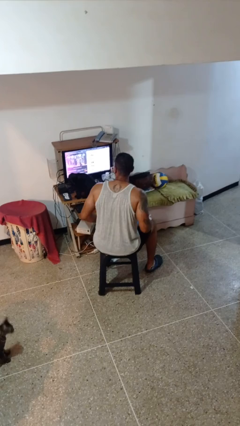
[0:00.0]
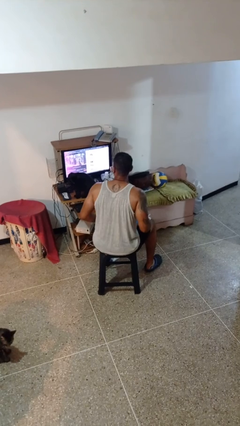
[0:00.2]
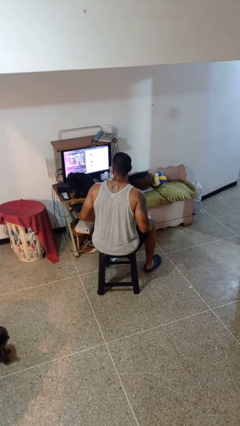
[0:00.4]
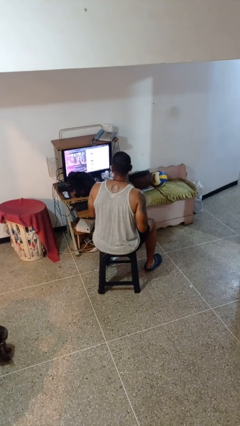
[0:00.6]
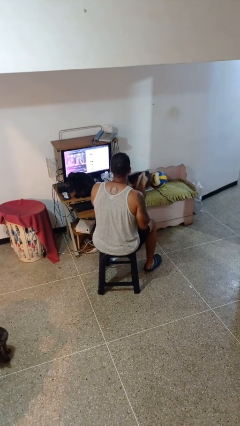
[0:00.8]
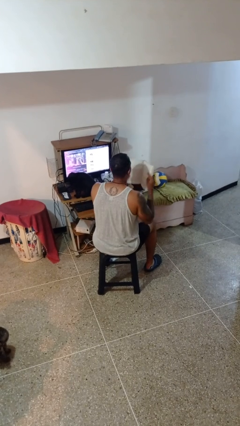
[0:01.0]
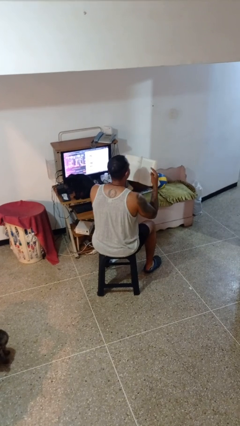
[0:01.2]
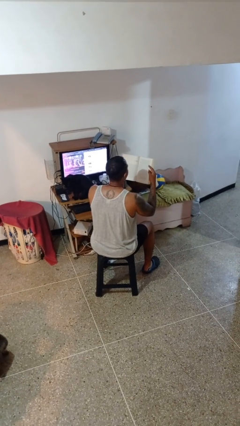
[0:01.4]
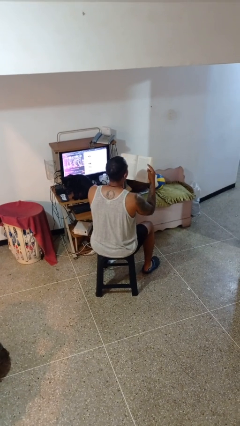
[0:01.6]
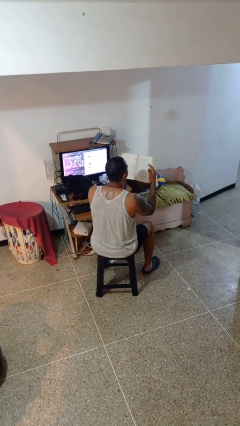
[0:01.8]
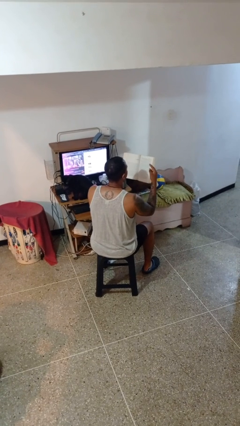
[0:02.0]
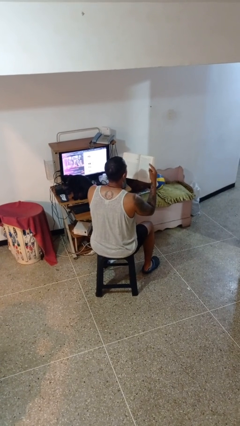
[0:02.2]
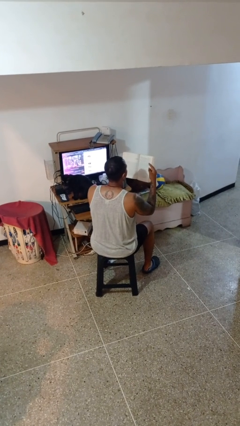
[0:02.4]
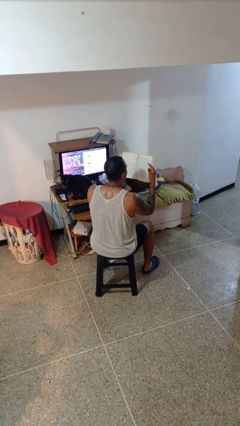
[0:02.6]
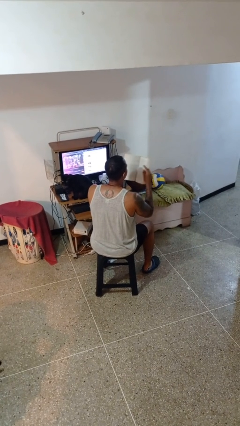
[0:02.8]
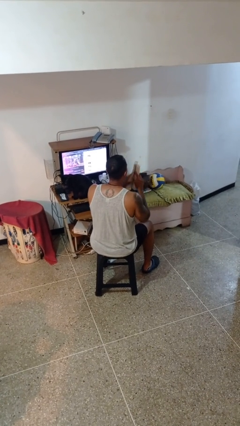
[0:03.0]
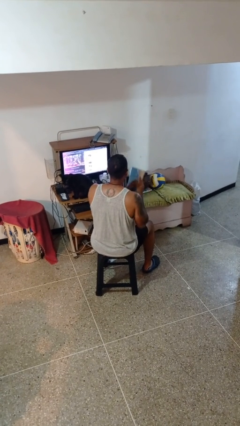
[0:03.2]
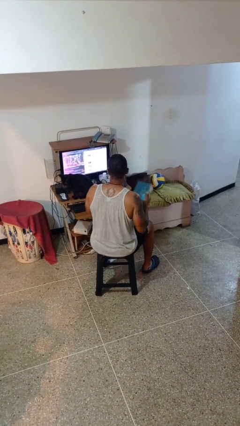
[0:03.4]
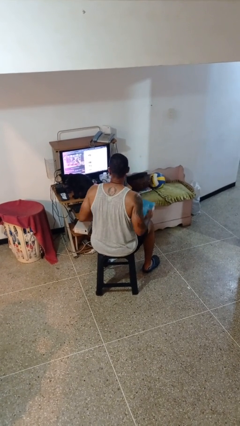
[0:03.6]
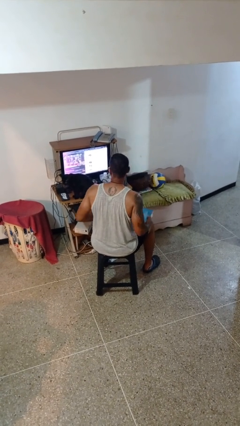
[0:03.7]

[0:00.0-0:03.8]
person reads book

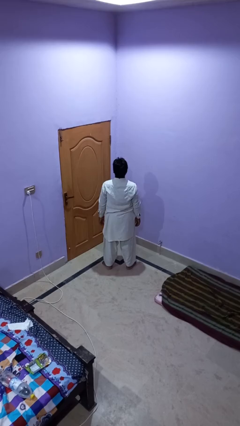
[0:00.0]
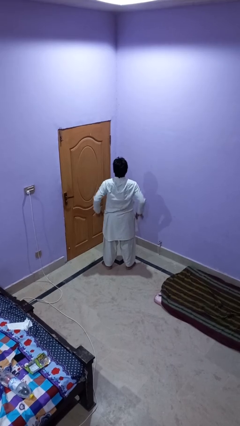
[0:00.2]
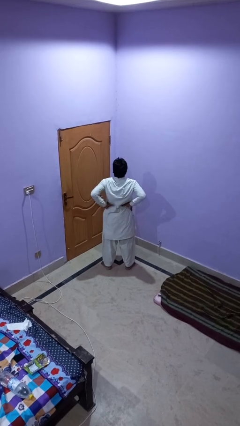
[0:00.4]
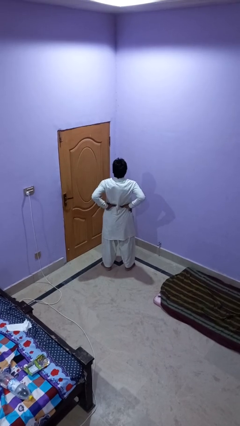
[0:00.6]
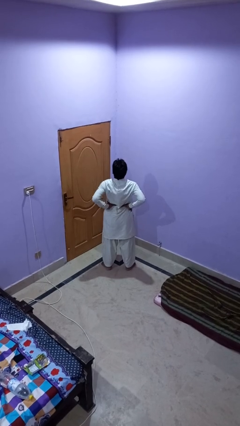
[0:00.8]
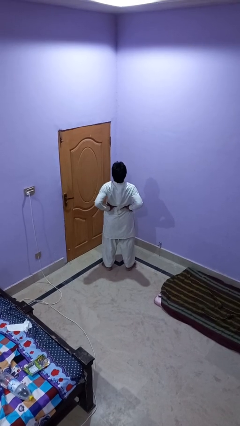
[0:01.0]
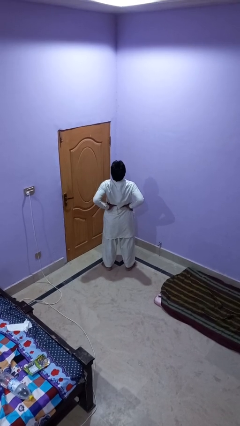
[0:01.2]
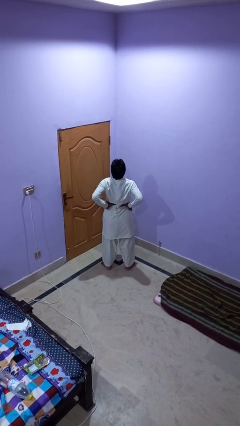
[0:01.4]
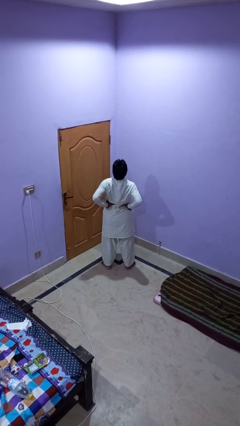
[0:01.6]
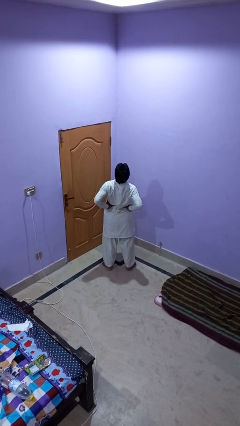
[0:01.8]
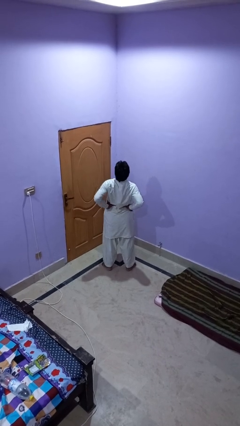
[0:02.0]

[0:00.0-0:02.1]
person stretches back

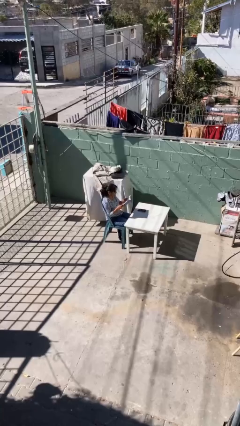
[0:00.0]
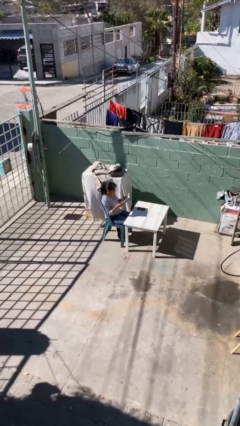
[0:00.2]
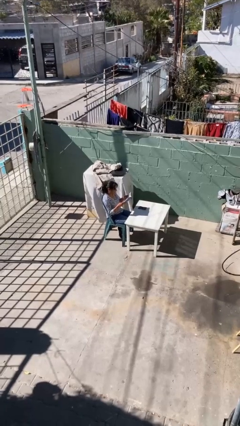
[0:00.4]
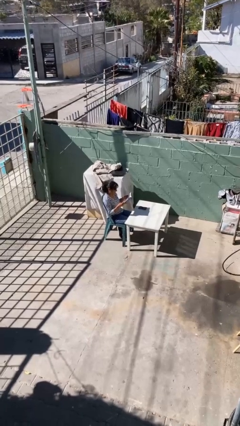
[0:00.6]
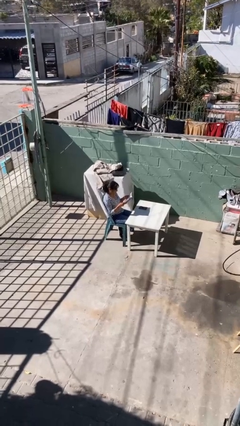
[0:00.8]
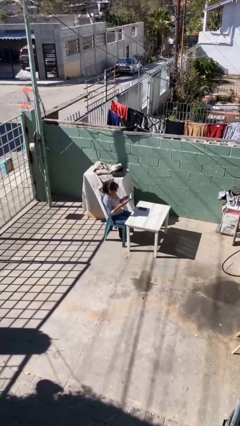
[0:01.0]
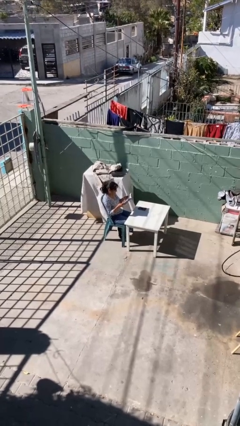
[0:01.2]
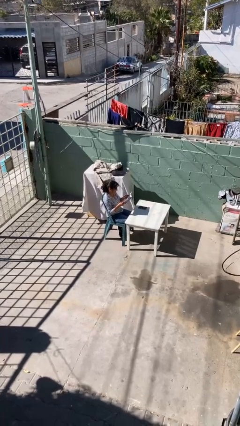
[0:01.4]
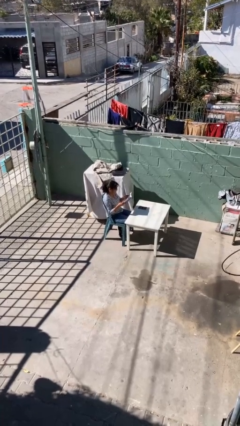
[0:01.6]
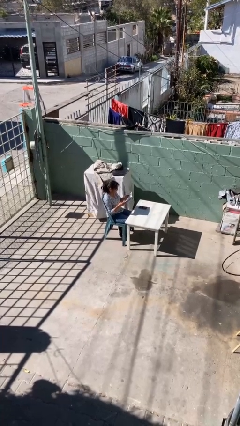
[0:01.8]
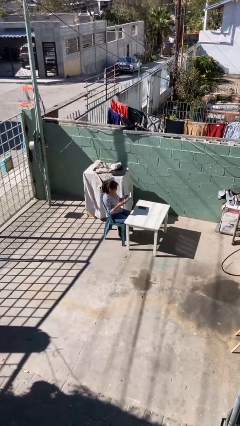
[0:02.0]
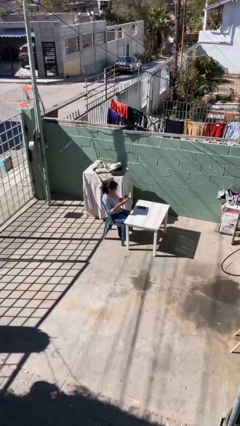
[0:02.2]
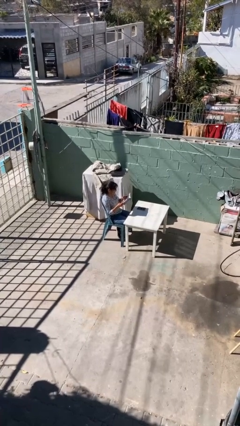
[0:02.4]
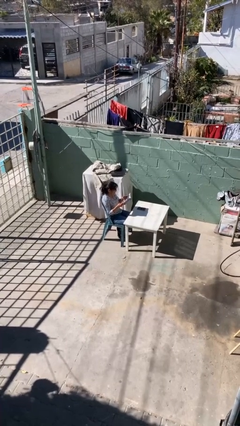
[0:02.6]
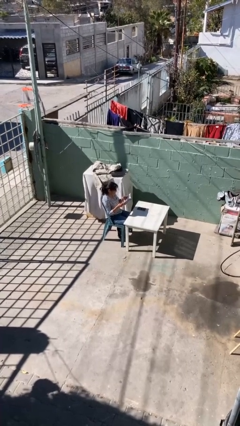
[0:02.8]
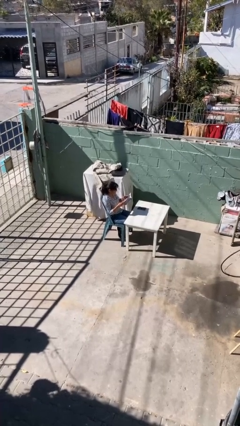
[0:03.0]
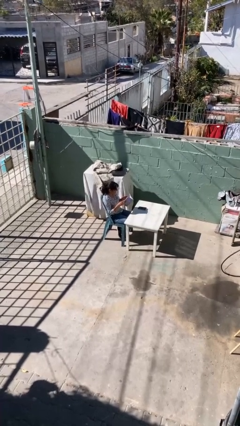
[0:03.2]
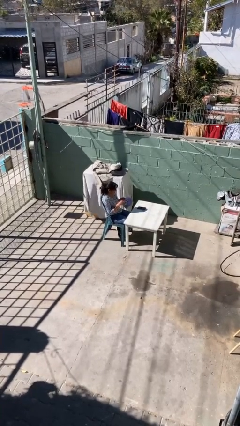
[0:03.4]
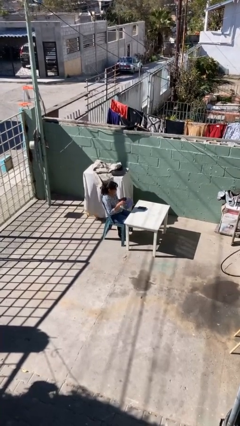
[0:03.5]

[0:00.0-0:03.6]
person reads document

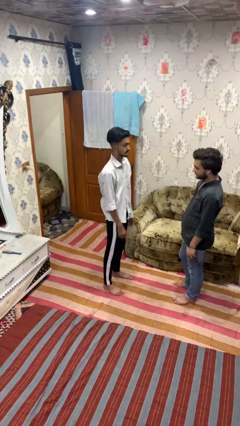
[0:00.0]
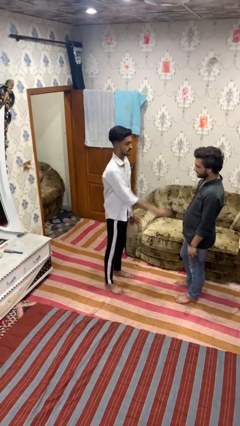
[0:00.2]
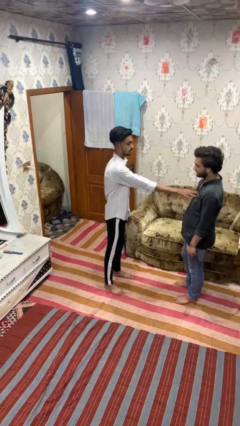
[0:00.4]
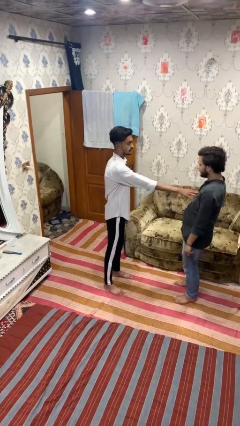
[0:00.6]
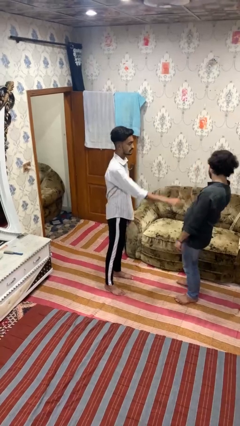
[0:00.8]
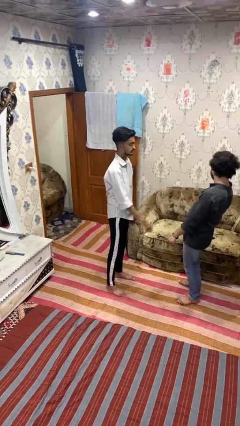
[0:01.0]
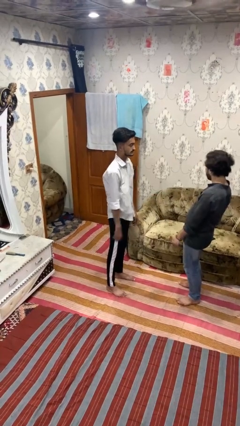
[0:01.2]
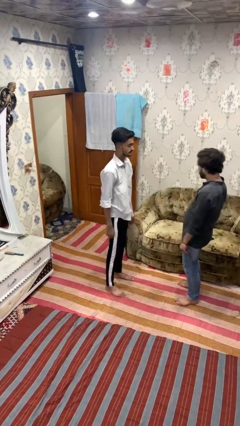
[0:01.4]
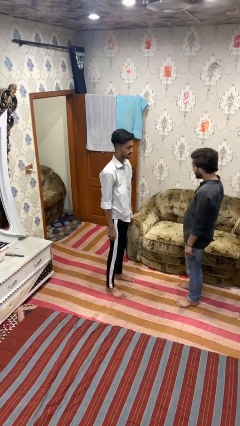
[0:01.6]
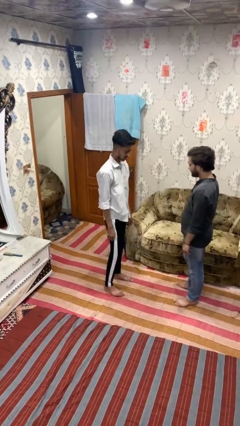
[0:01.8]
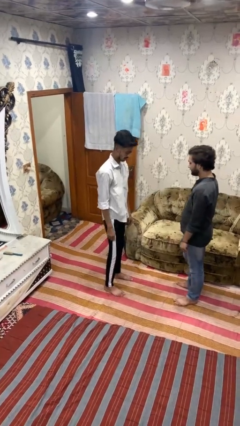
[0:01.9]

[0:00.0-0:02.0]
person shoves person

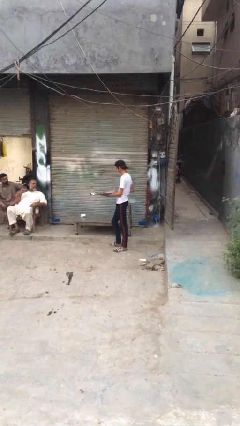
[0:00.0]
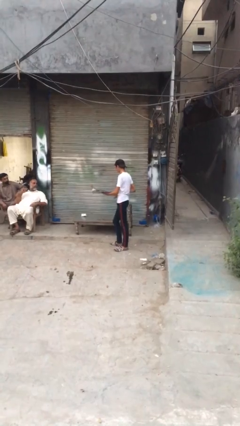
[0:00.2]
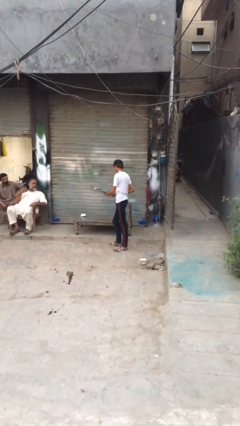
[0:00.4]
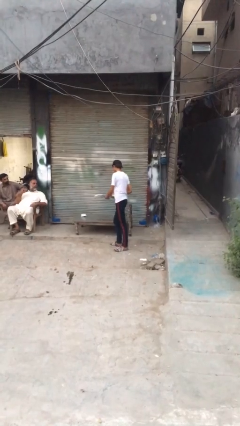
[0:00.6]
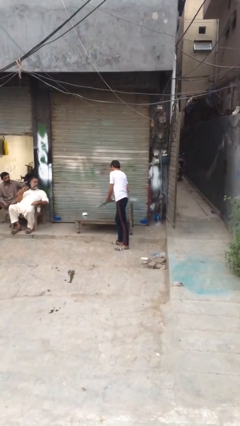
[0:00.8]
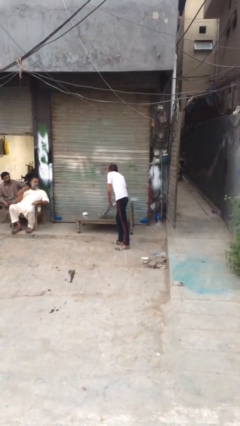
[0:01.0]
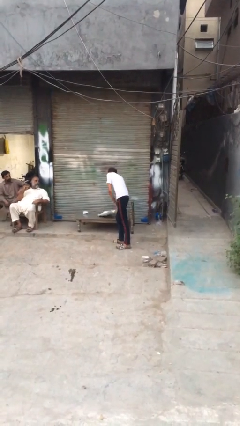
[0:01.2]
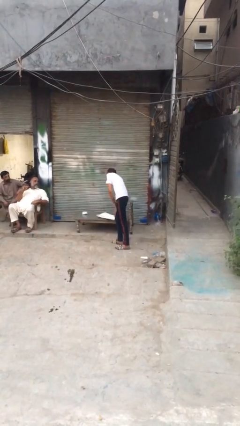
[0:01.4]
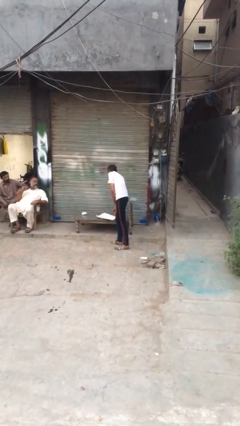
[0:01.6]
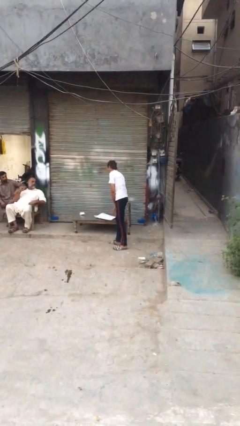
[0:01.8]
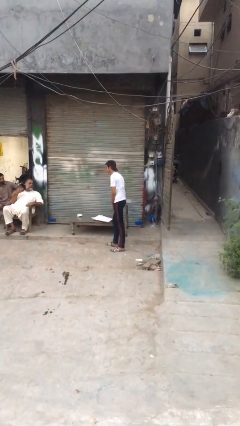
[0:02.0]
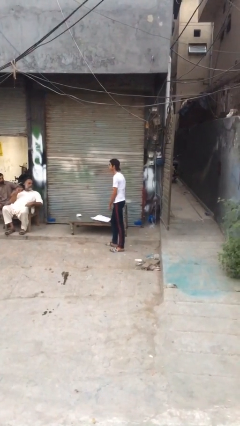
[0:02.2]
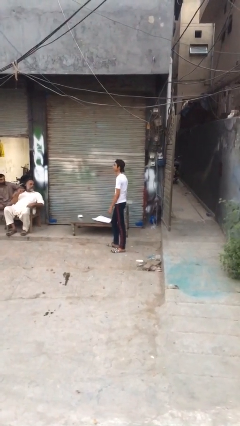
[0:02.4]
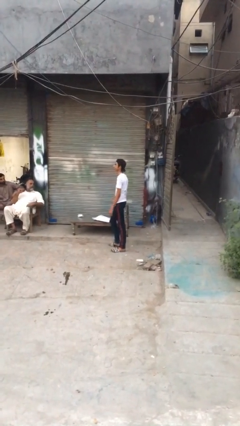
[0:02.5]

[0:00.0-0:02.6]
person puts down object on table

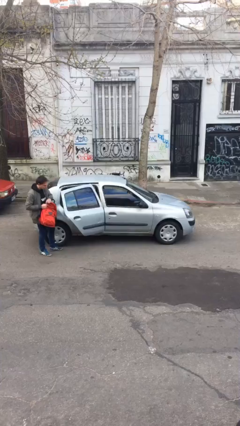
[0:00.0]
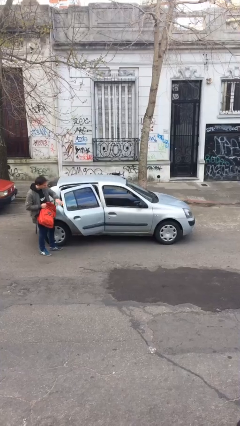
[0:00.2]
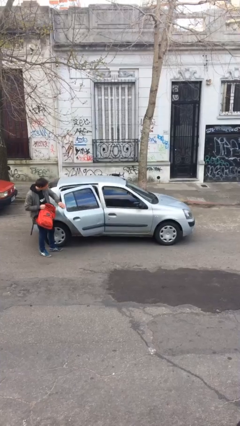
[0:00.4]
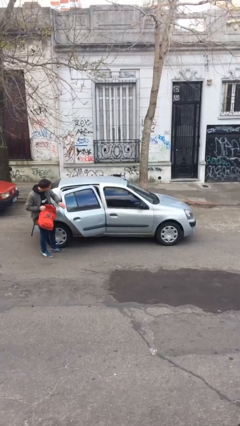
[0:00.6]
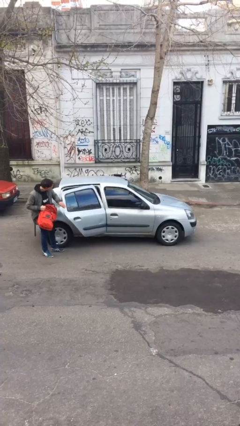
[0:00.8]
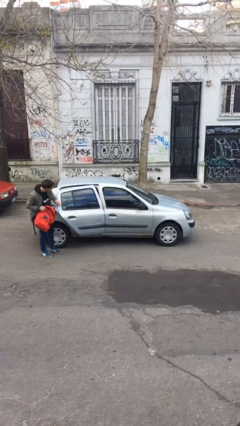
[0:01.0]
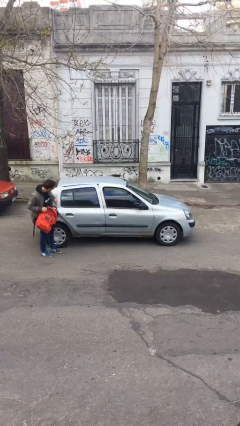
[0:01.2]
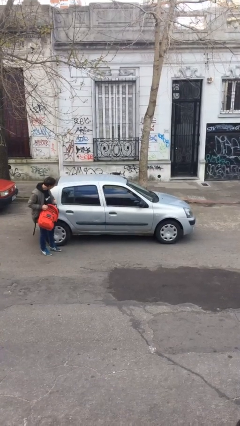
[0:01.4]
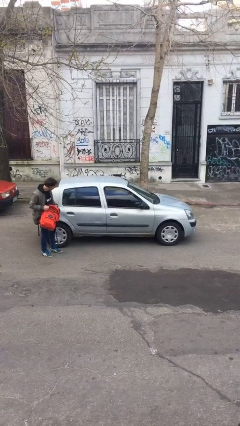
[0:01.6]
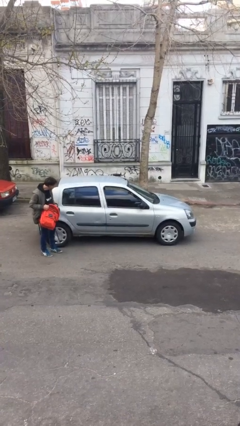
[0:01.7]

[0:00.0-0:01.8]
person closes car door

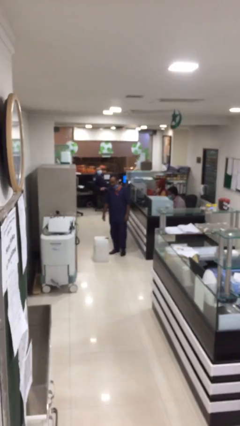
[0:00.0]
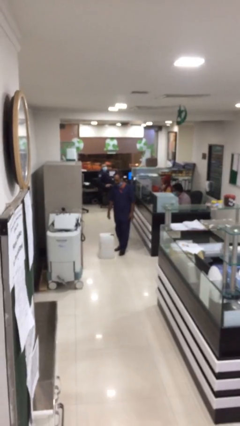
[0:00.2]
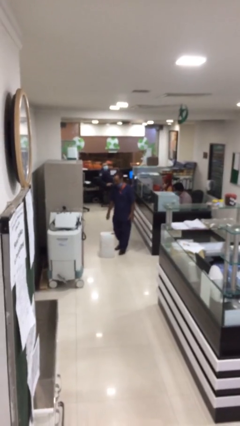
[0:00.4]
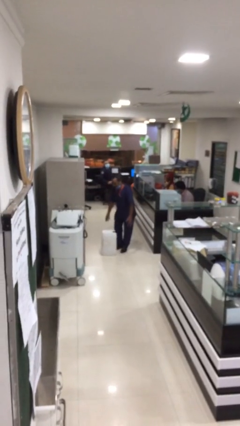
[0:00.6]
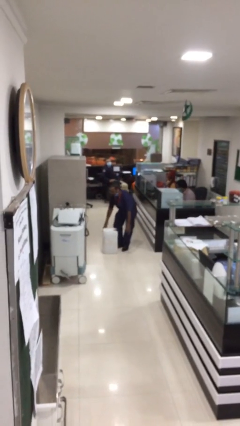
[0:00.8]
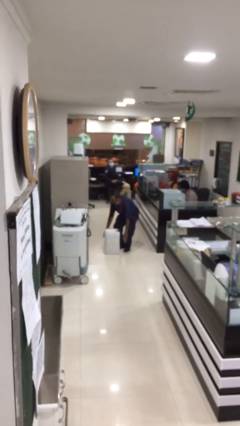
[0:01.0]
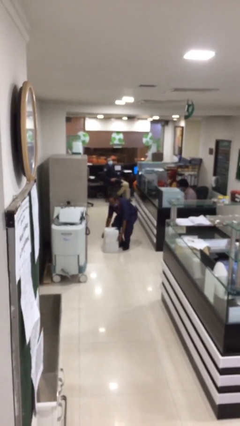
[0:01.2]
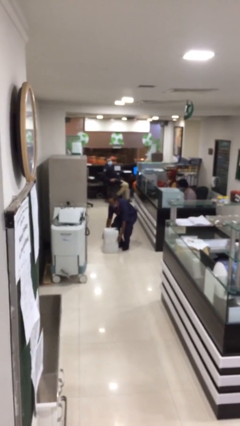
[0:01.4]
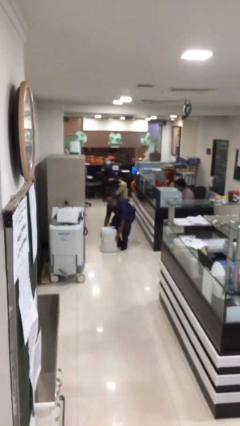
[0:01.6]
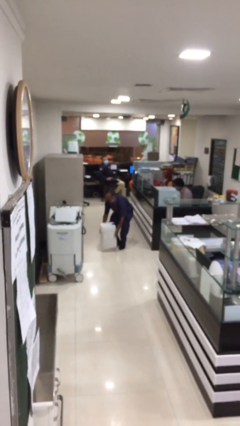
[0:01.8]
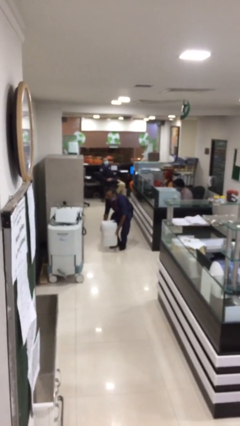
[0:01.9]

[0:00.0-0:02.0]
person picks up object from floor
